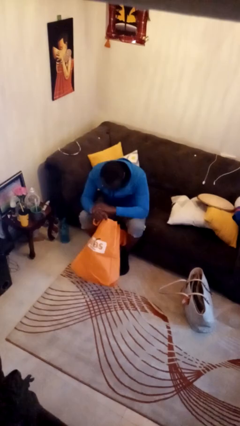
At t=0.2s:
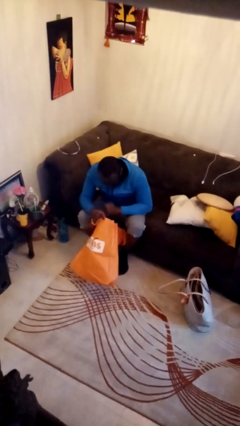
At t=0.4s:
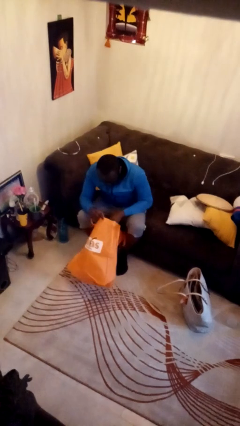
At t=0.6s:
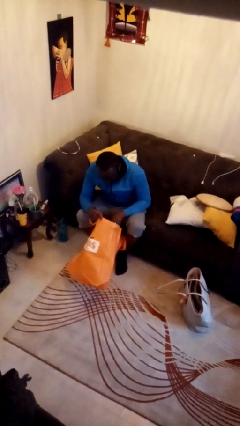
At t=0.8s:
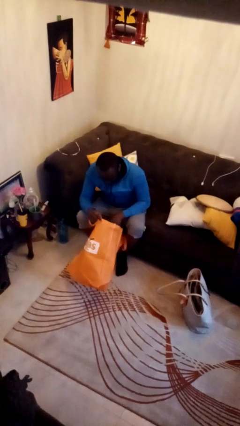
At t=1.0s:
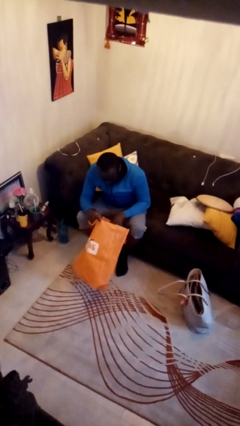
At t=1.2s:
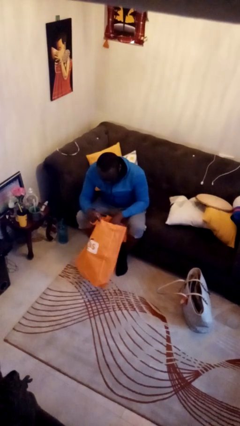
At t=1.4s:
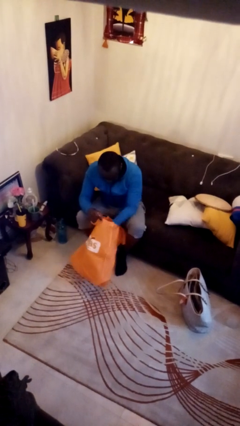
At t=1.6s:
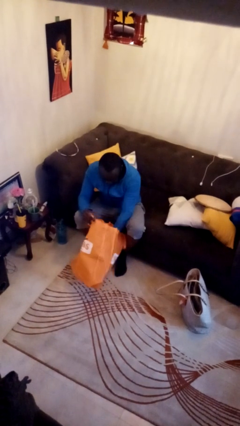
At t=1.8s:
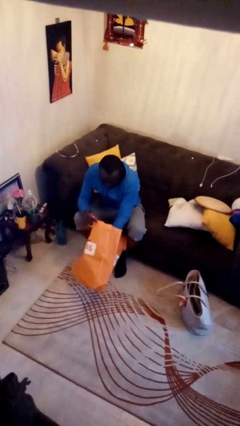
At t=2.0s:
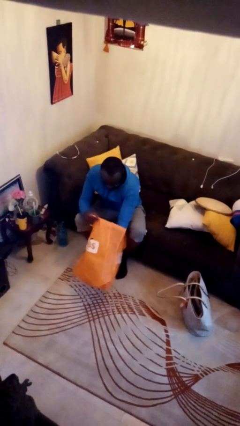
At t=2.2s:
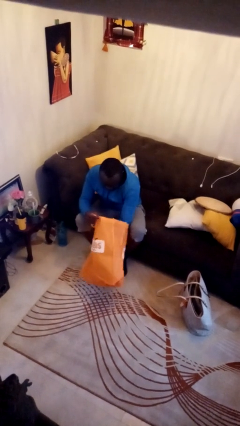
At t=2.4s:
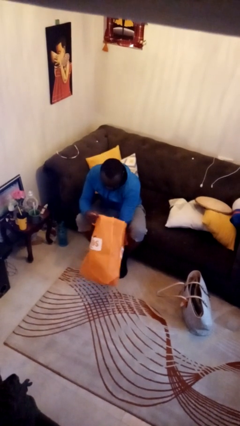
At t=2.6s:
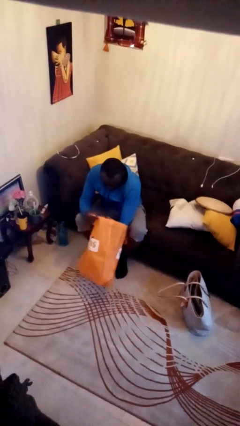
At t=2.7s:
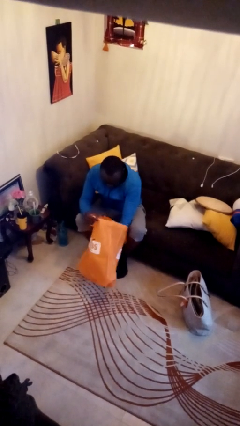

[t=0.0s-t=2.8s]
person searches in bag

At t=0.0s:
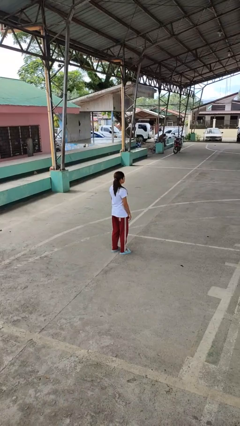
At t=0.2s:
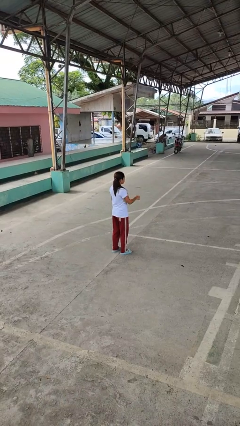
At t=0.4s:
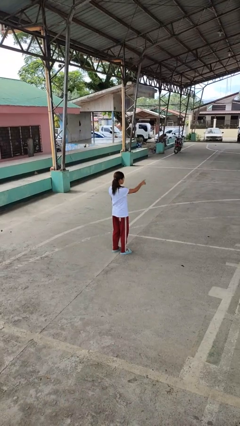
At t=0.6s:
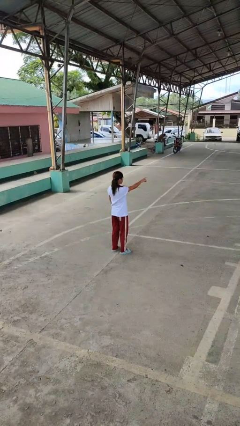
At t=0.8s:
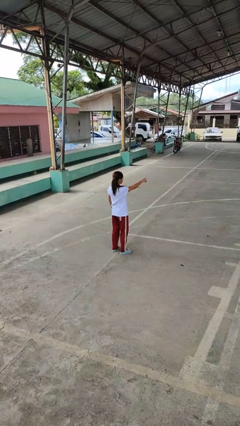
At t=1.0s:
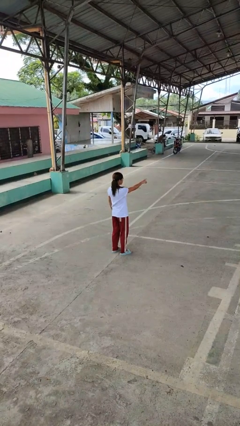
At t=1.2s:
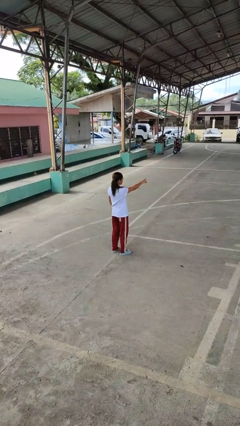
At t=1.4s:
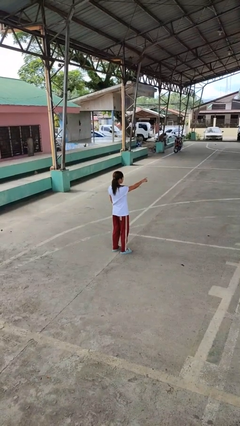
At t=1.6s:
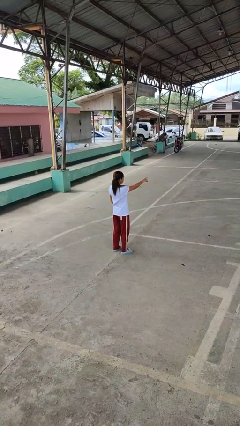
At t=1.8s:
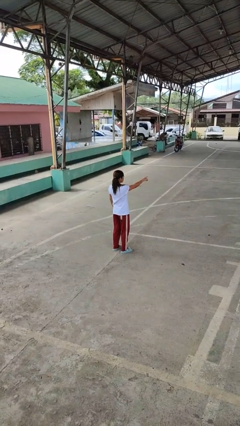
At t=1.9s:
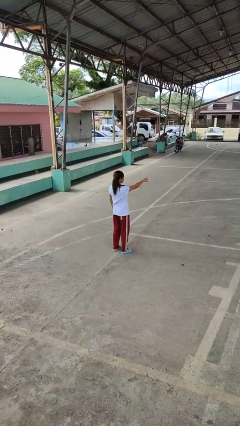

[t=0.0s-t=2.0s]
person points at person

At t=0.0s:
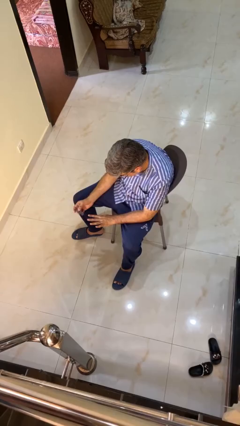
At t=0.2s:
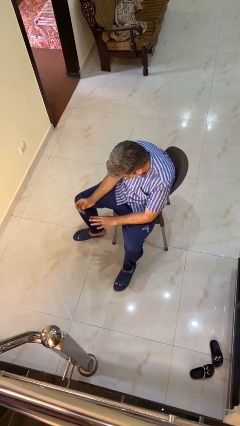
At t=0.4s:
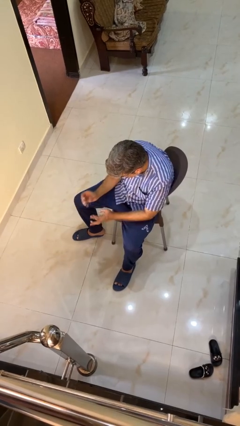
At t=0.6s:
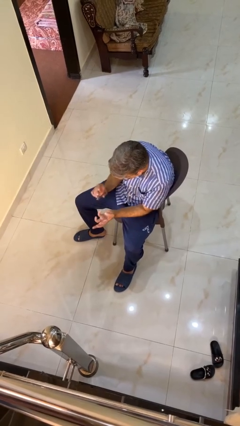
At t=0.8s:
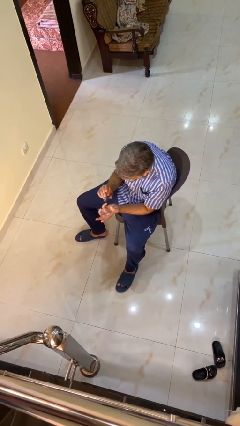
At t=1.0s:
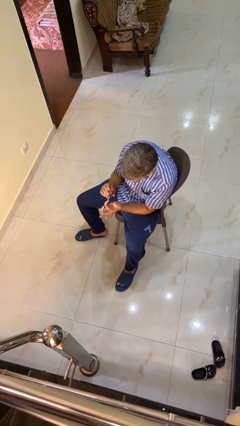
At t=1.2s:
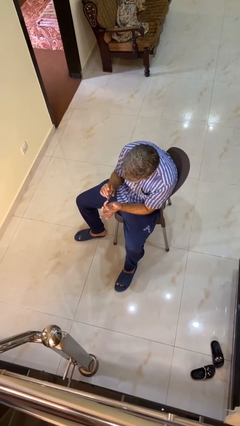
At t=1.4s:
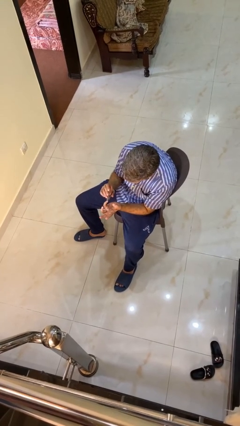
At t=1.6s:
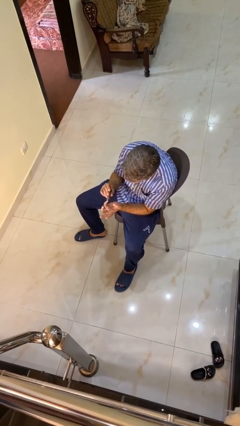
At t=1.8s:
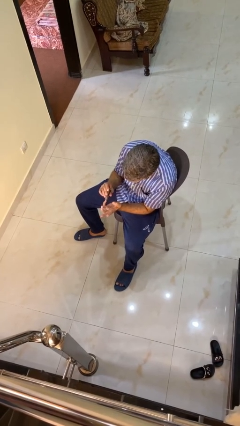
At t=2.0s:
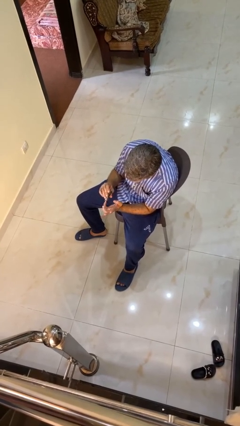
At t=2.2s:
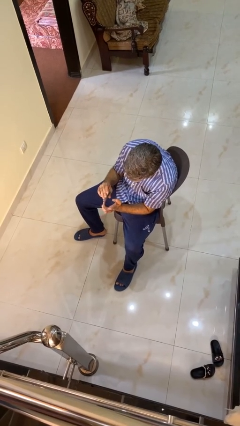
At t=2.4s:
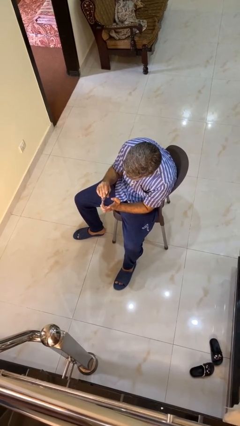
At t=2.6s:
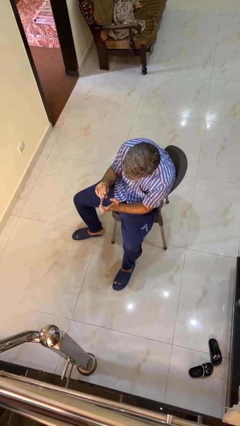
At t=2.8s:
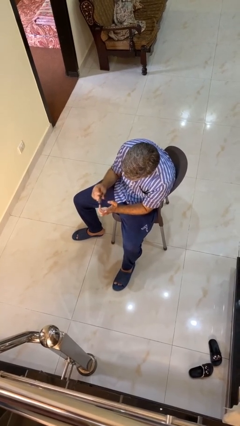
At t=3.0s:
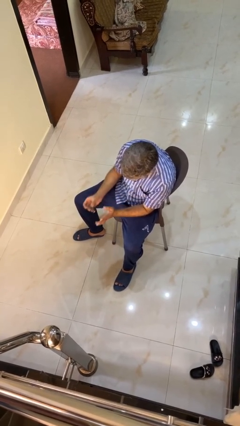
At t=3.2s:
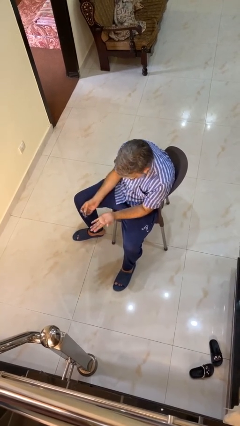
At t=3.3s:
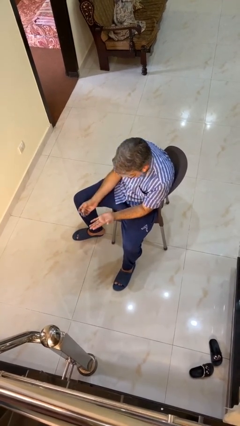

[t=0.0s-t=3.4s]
person clips fingernails

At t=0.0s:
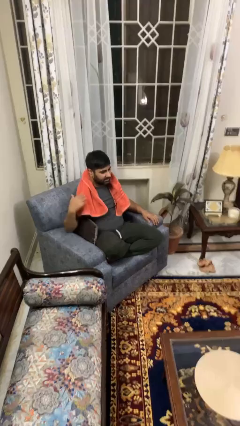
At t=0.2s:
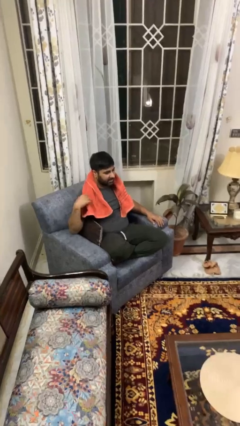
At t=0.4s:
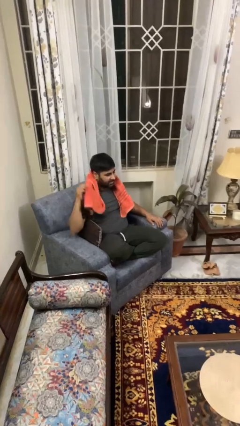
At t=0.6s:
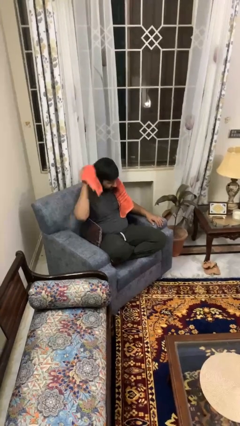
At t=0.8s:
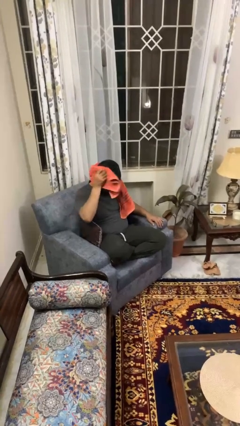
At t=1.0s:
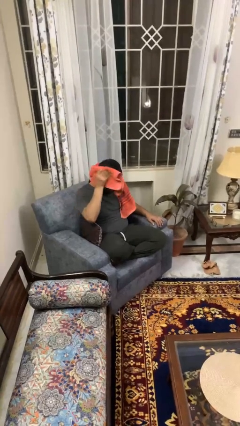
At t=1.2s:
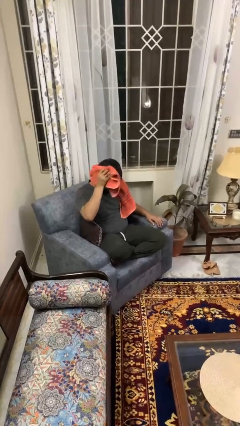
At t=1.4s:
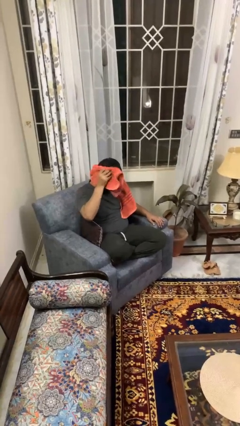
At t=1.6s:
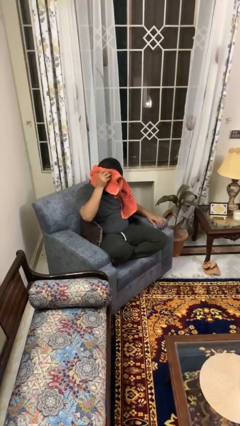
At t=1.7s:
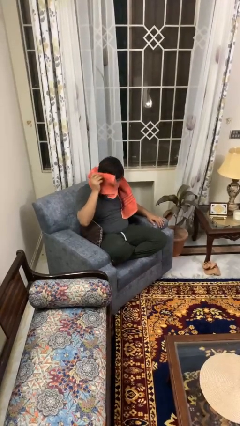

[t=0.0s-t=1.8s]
person dries hair with towel

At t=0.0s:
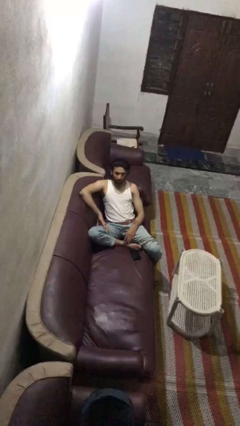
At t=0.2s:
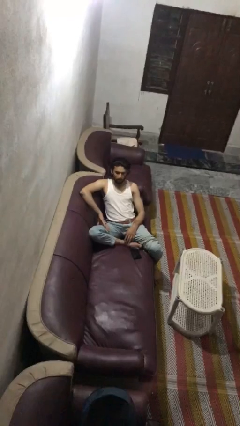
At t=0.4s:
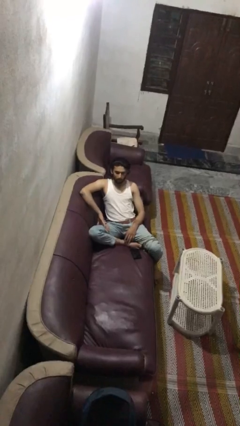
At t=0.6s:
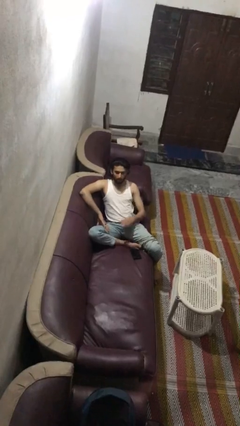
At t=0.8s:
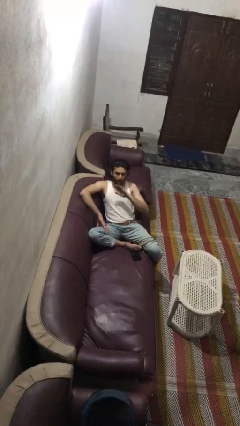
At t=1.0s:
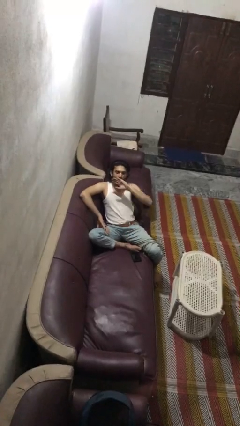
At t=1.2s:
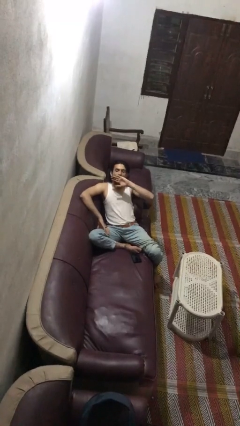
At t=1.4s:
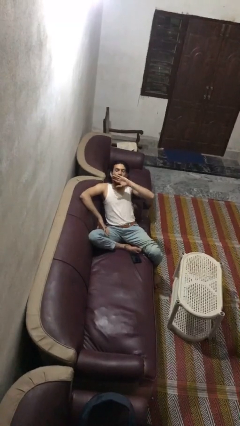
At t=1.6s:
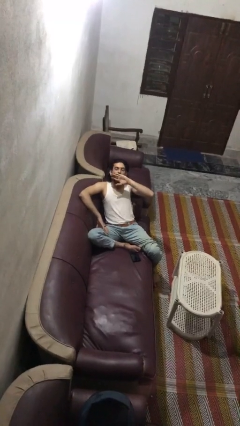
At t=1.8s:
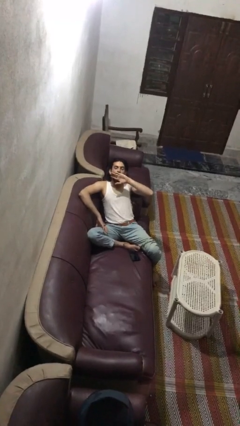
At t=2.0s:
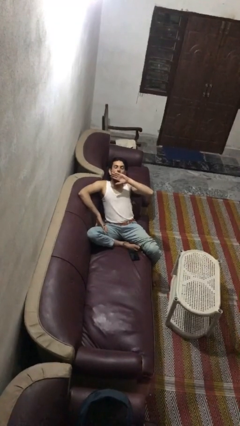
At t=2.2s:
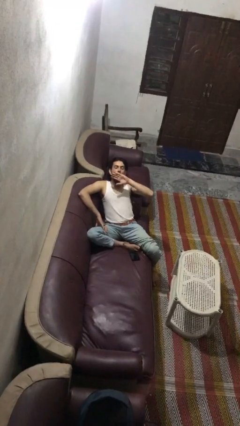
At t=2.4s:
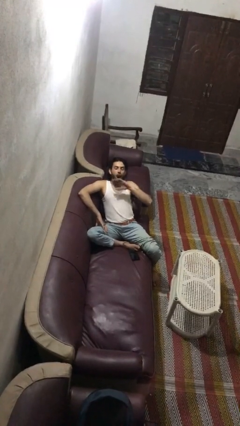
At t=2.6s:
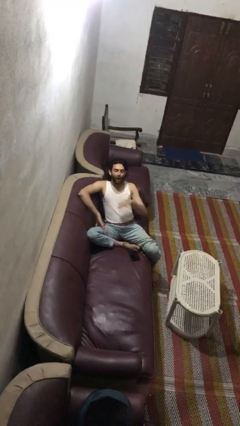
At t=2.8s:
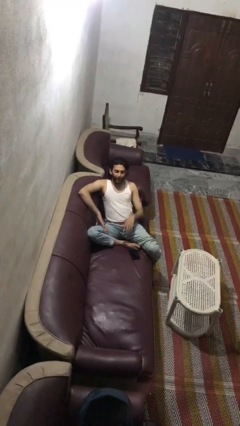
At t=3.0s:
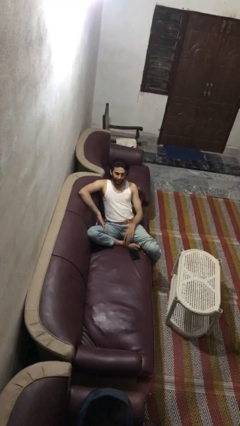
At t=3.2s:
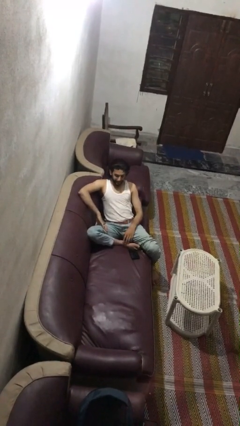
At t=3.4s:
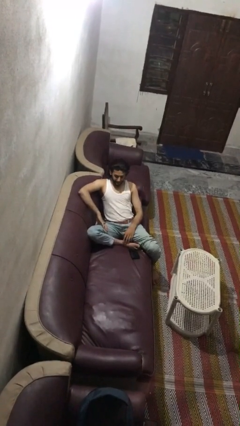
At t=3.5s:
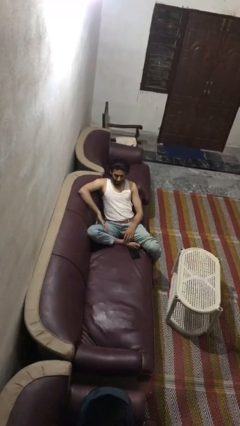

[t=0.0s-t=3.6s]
person yawns

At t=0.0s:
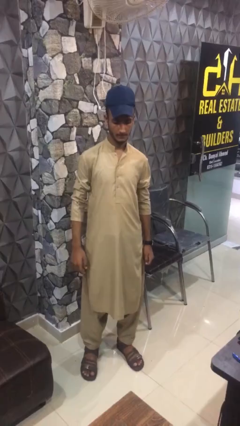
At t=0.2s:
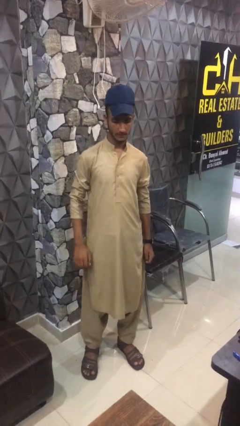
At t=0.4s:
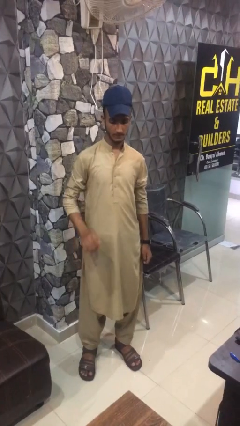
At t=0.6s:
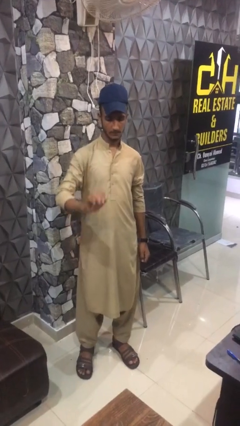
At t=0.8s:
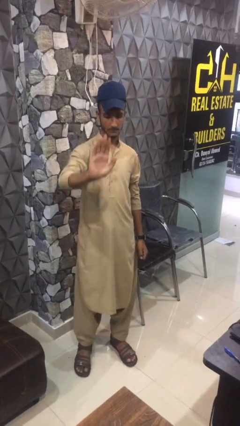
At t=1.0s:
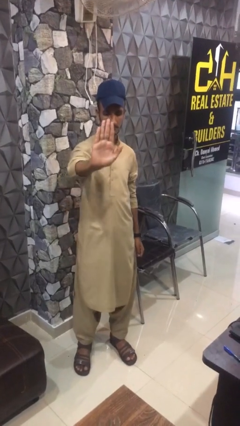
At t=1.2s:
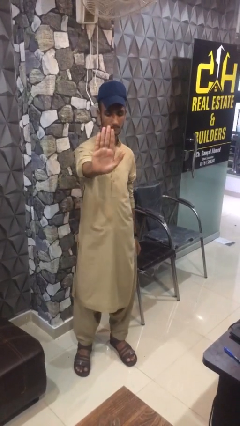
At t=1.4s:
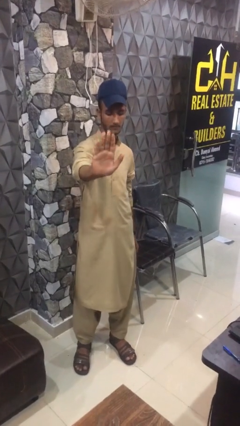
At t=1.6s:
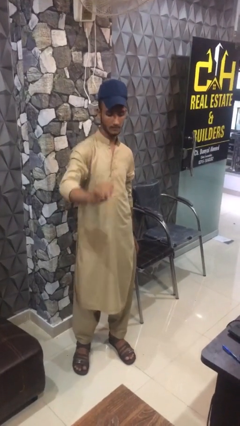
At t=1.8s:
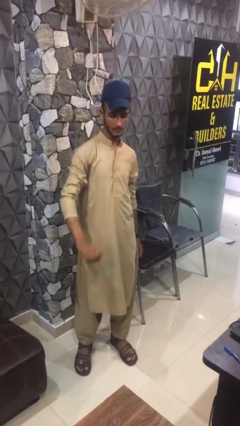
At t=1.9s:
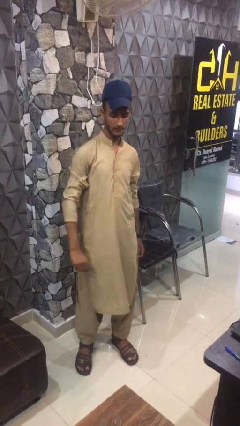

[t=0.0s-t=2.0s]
person gestures stop

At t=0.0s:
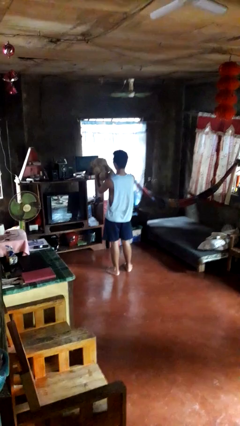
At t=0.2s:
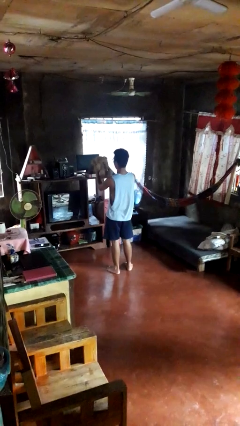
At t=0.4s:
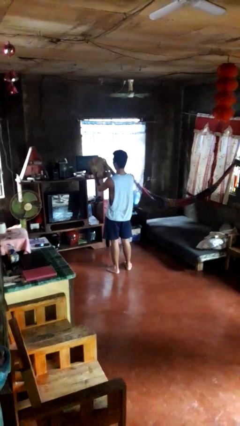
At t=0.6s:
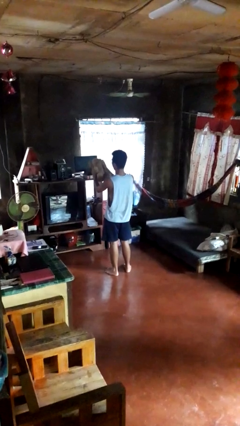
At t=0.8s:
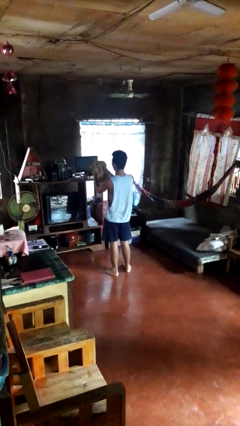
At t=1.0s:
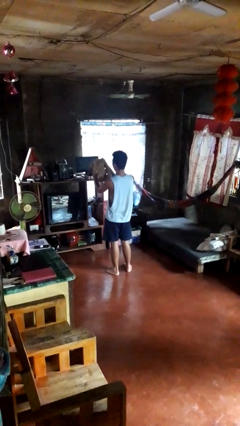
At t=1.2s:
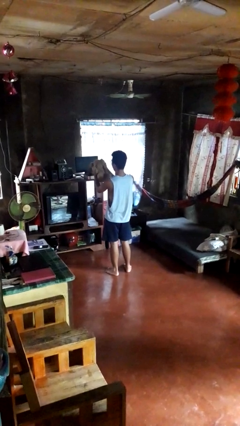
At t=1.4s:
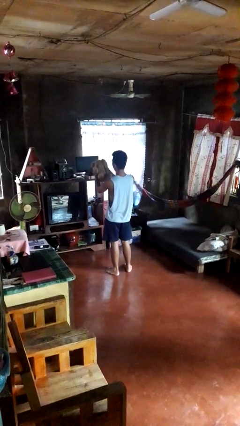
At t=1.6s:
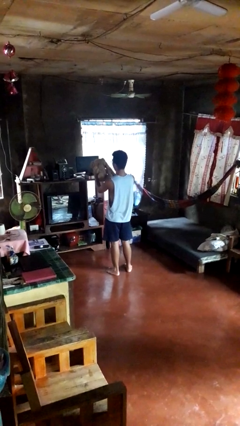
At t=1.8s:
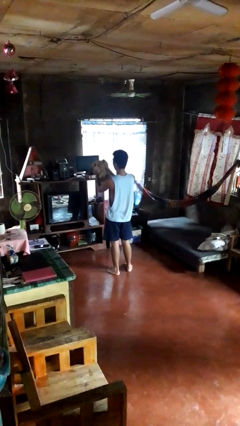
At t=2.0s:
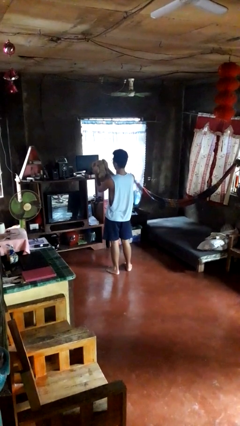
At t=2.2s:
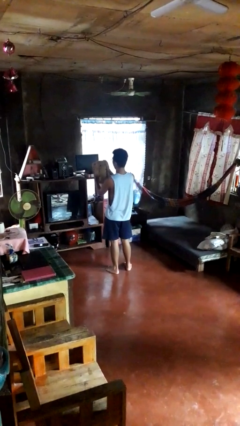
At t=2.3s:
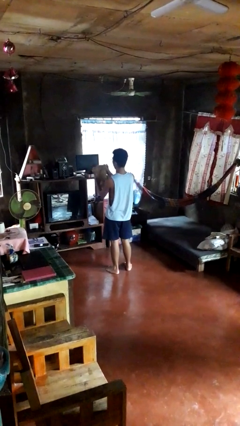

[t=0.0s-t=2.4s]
person squeezes object
